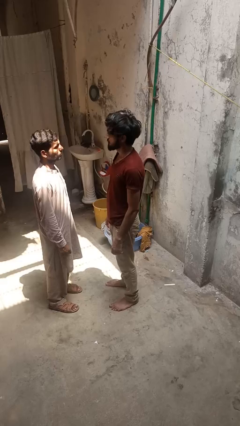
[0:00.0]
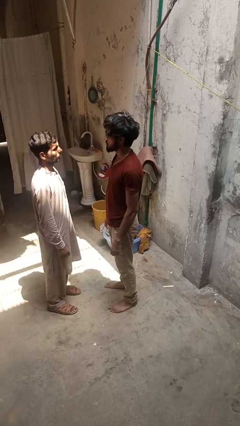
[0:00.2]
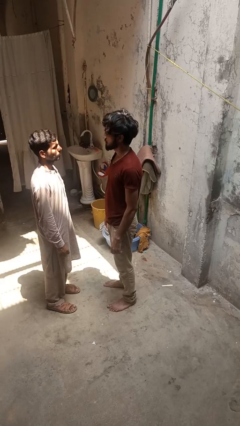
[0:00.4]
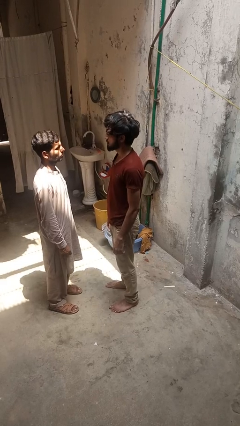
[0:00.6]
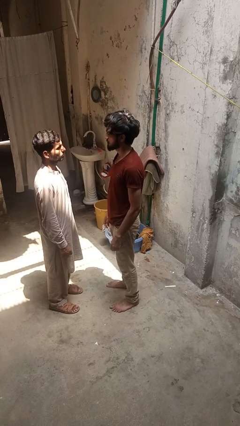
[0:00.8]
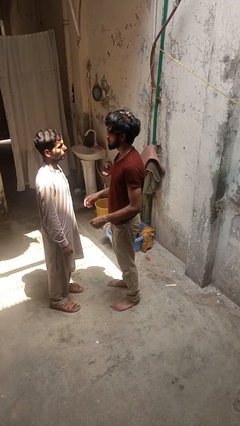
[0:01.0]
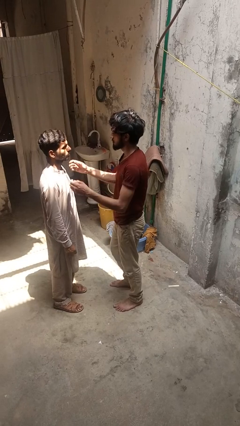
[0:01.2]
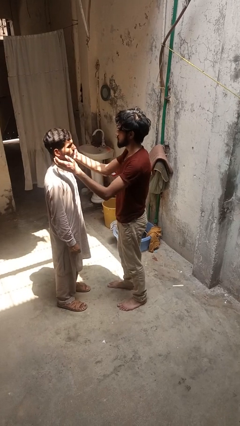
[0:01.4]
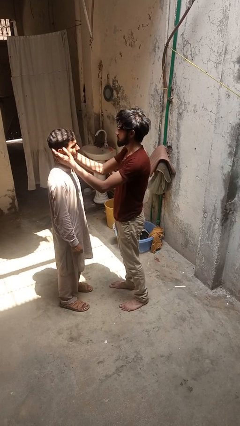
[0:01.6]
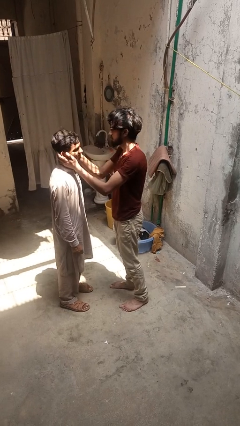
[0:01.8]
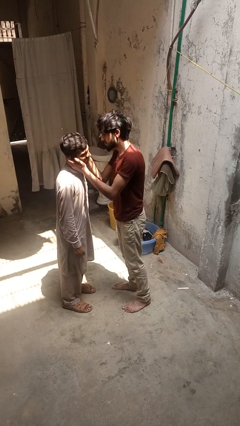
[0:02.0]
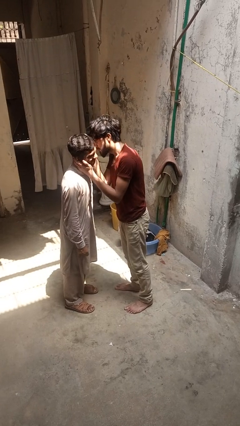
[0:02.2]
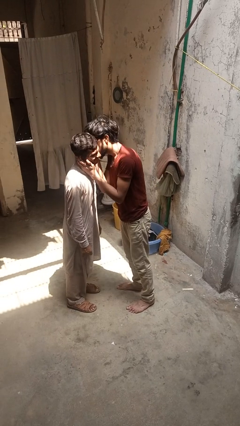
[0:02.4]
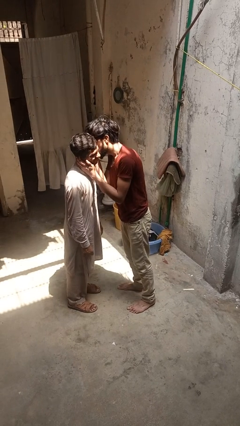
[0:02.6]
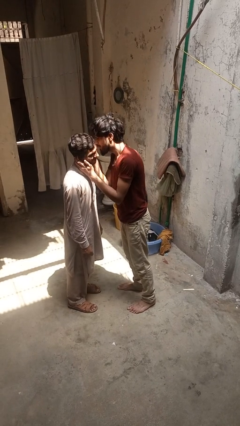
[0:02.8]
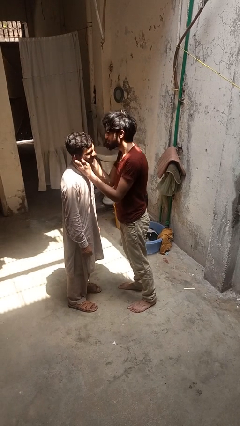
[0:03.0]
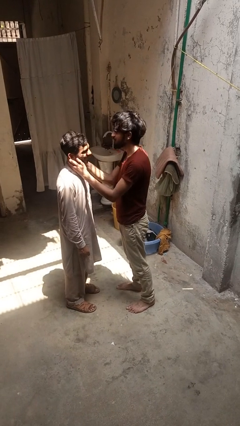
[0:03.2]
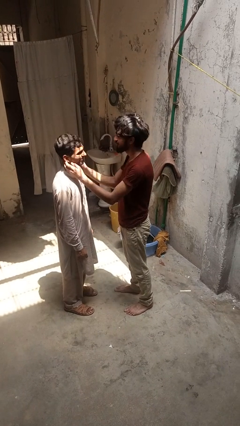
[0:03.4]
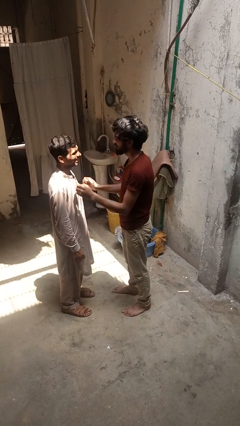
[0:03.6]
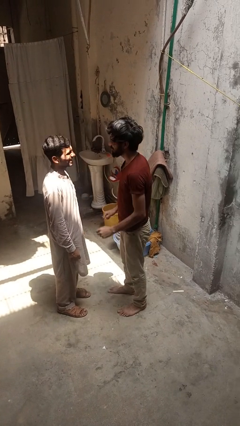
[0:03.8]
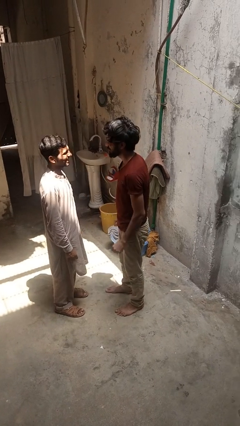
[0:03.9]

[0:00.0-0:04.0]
person kisses cheek of person

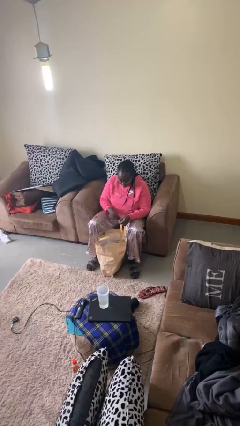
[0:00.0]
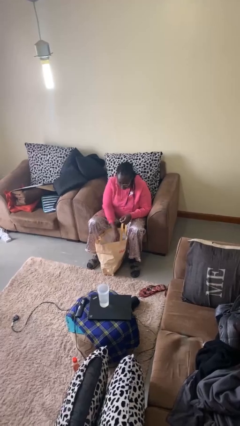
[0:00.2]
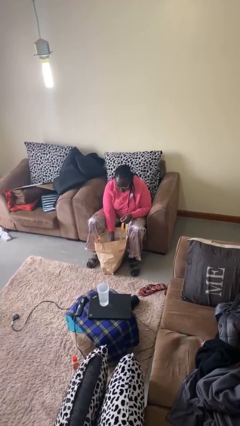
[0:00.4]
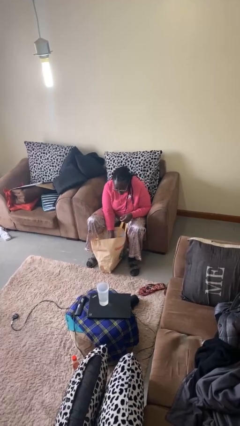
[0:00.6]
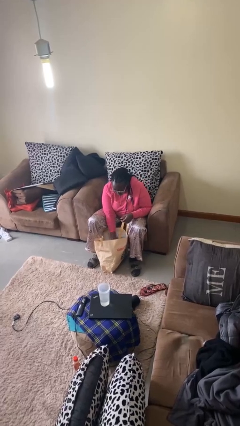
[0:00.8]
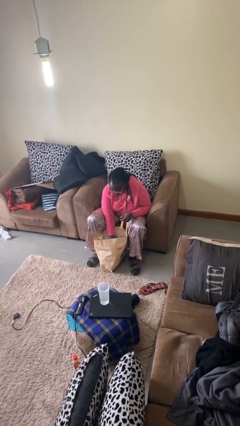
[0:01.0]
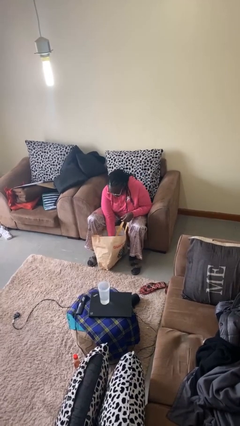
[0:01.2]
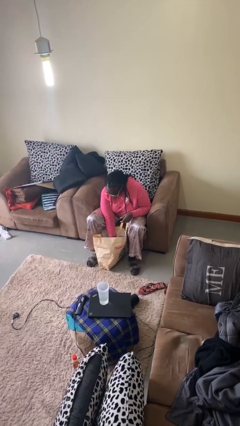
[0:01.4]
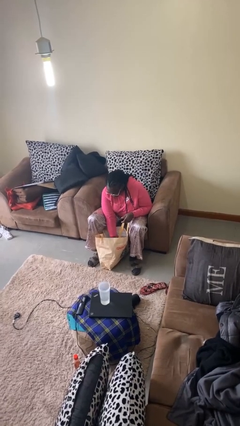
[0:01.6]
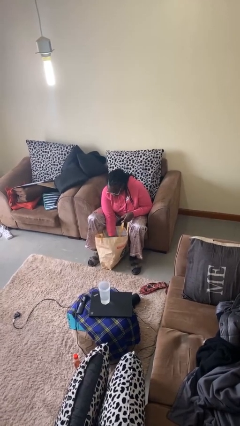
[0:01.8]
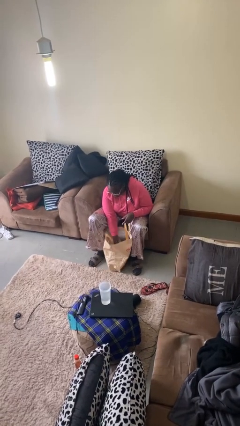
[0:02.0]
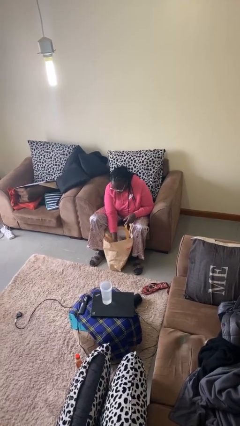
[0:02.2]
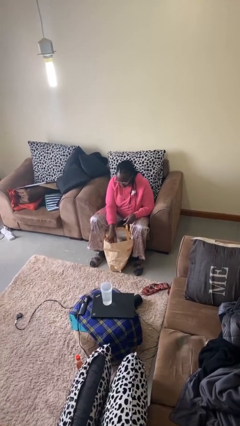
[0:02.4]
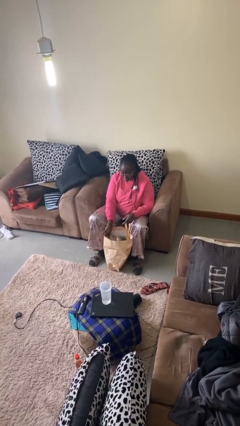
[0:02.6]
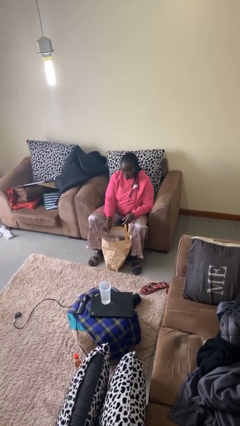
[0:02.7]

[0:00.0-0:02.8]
person searches in bag

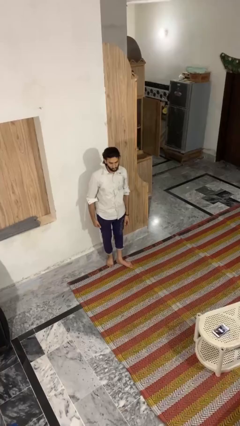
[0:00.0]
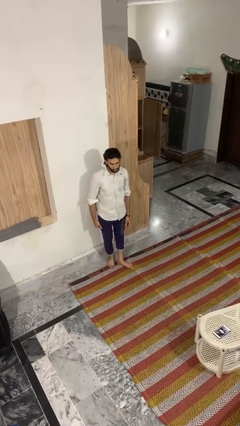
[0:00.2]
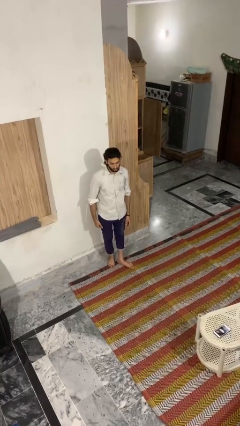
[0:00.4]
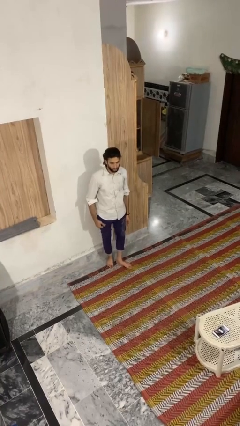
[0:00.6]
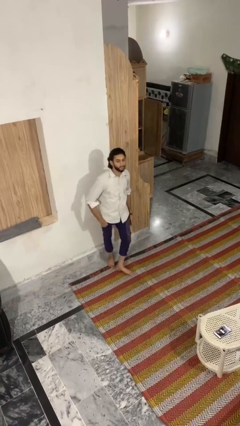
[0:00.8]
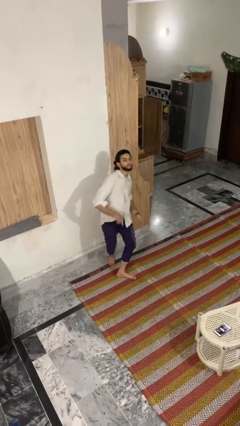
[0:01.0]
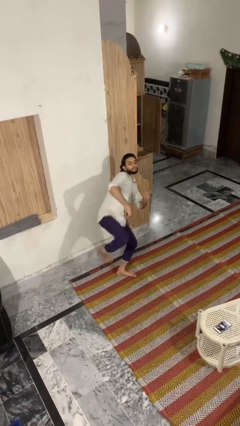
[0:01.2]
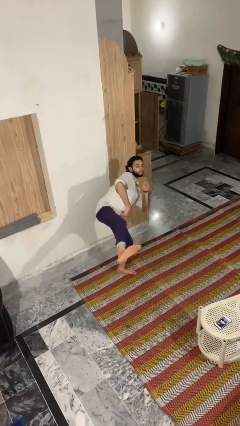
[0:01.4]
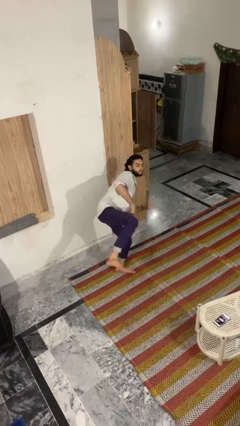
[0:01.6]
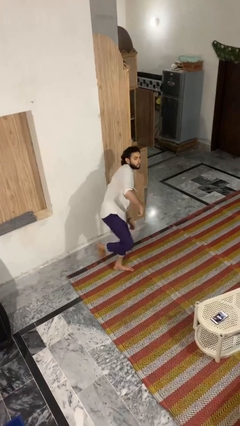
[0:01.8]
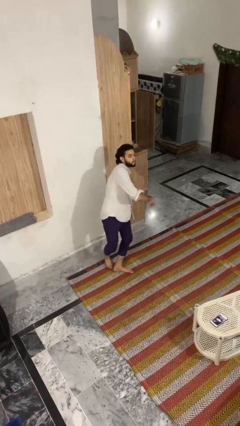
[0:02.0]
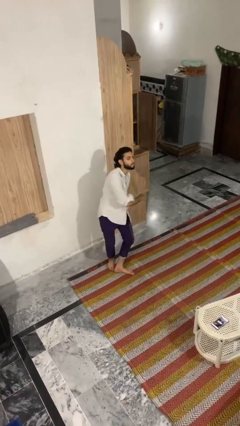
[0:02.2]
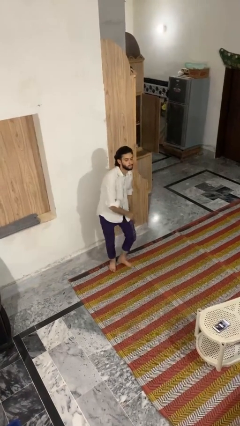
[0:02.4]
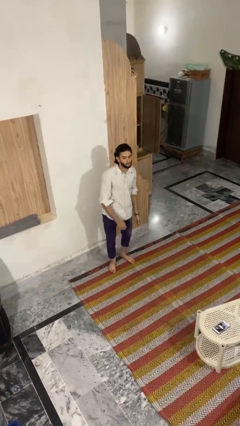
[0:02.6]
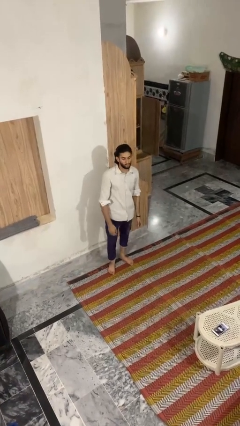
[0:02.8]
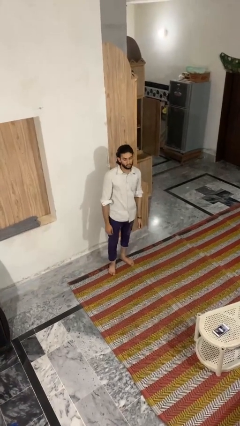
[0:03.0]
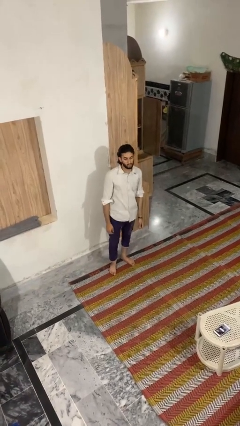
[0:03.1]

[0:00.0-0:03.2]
person karate kicks

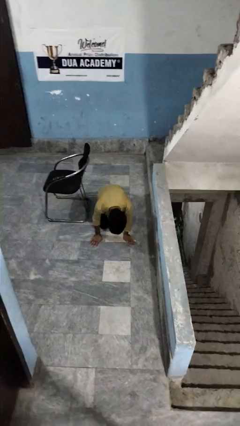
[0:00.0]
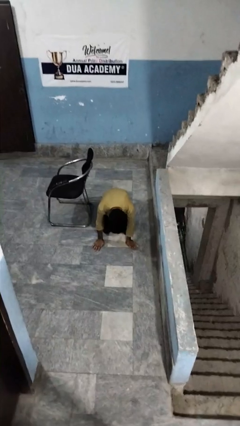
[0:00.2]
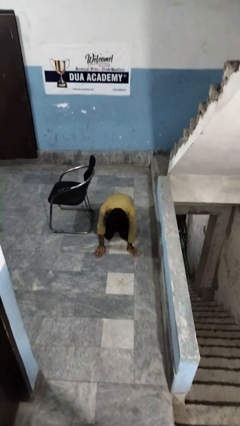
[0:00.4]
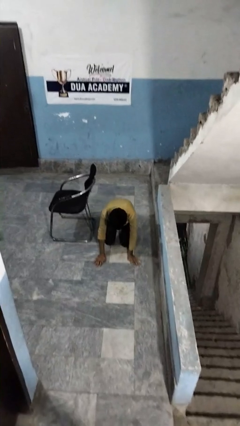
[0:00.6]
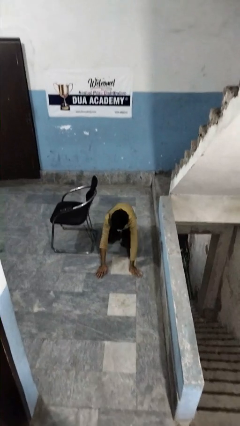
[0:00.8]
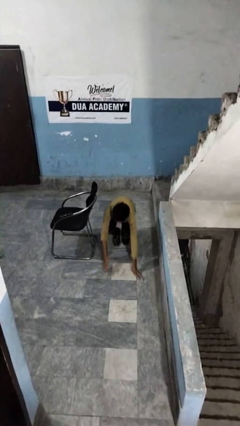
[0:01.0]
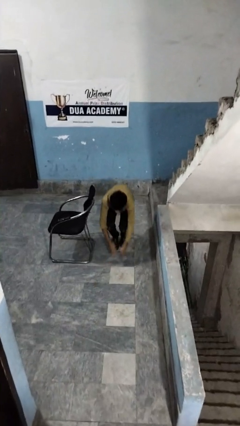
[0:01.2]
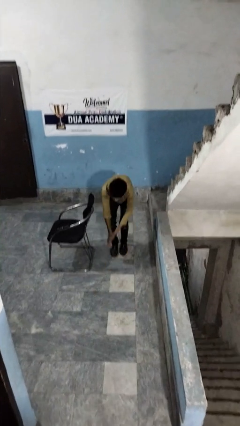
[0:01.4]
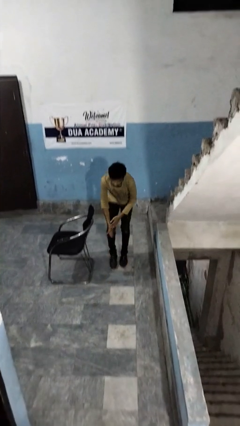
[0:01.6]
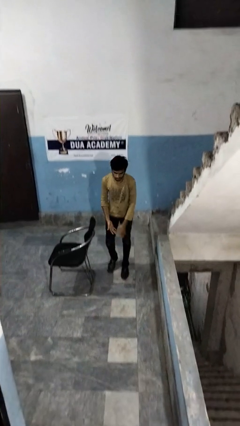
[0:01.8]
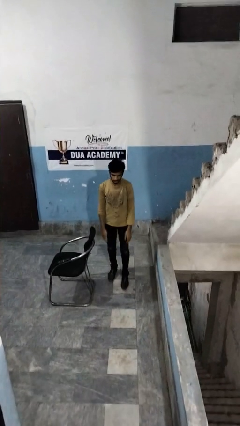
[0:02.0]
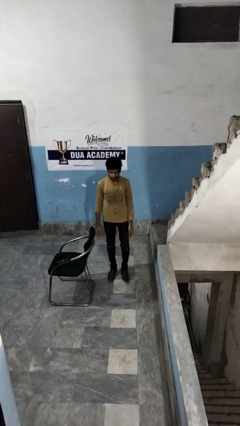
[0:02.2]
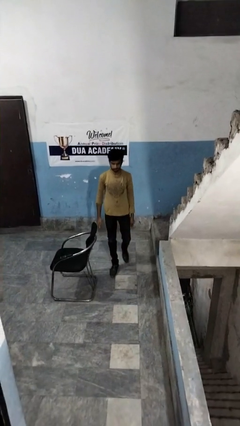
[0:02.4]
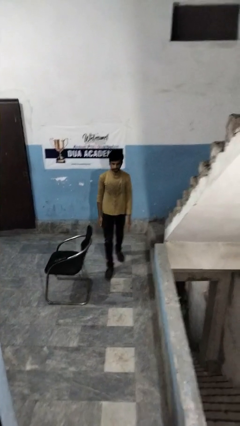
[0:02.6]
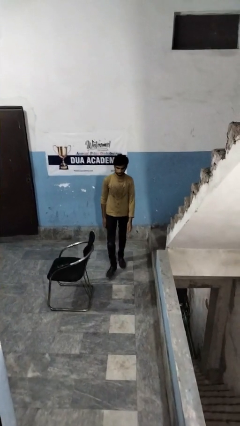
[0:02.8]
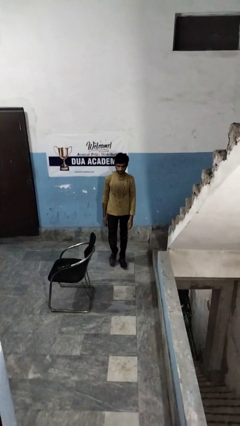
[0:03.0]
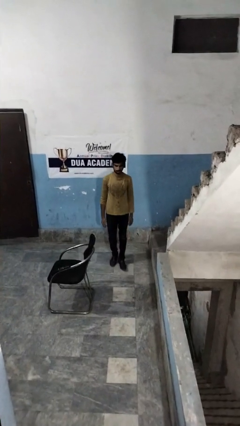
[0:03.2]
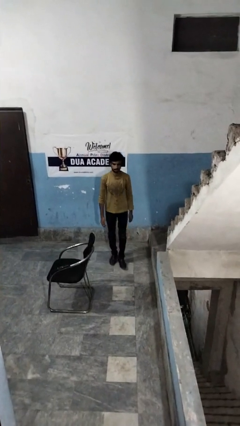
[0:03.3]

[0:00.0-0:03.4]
person stands up from floor

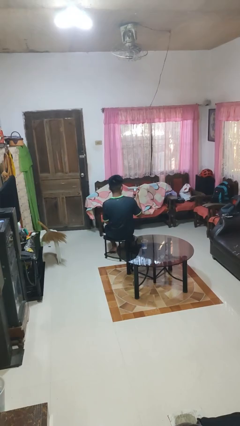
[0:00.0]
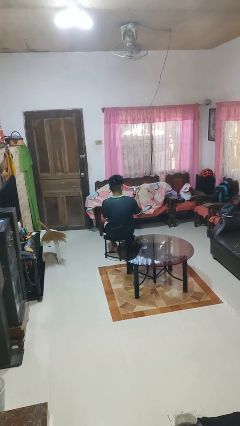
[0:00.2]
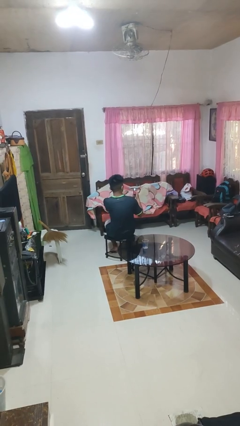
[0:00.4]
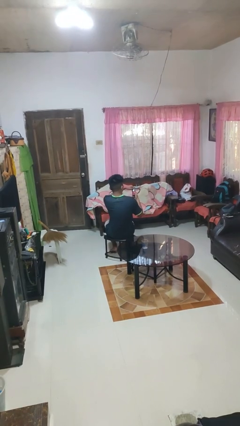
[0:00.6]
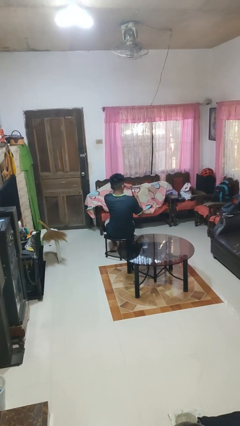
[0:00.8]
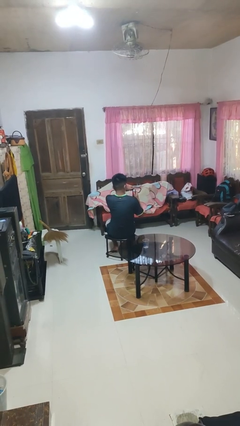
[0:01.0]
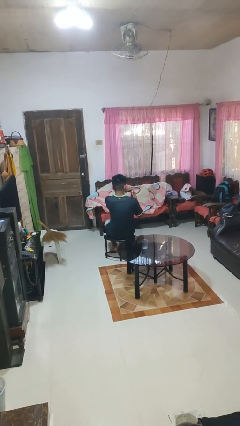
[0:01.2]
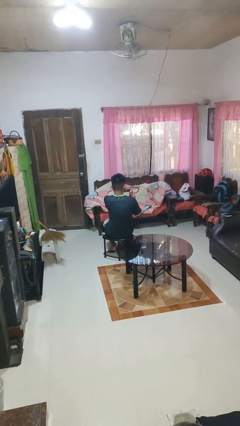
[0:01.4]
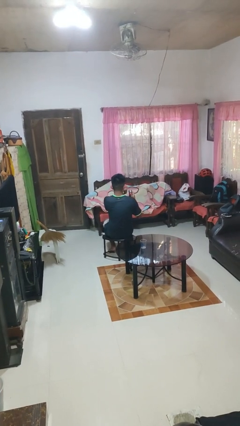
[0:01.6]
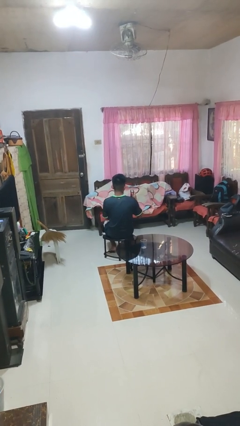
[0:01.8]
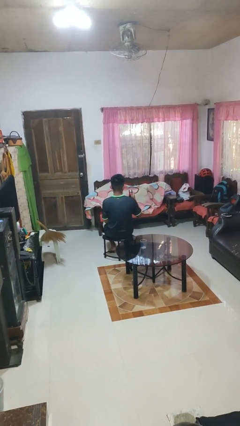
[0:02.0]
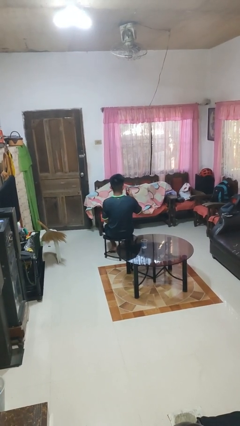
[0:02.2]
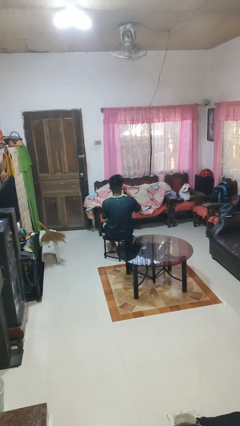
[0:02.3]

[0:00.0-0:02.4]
person opens beverage can

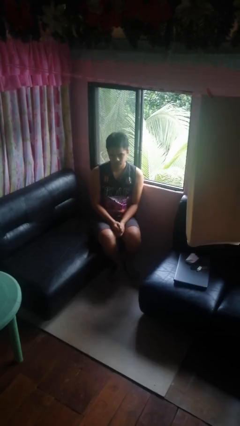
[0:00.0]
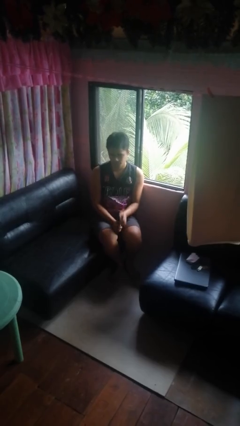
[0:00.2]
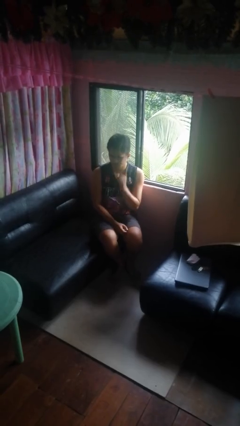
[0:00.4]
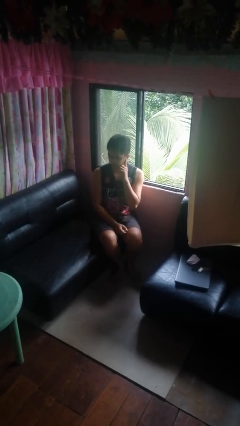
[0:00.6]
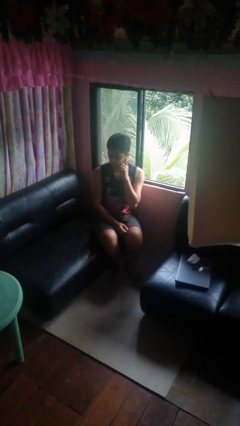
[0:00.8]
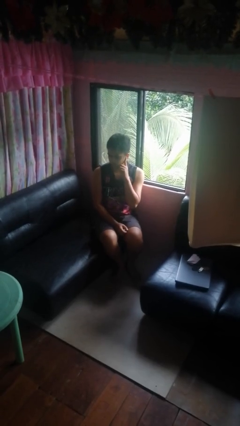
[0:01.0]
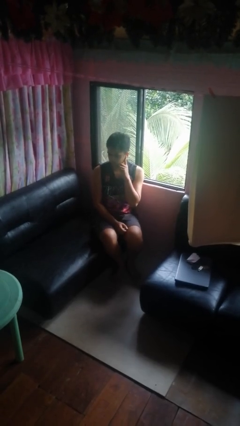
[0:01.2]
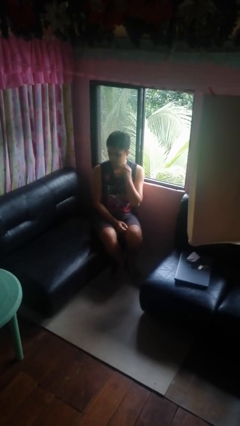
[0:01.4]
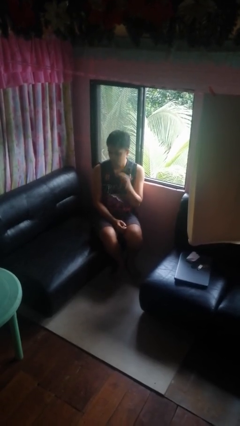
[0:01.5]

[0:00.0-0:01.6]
person gestures listen closely

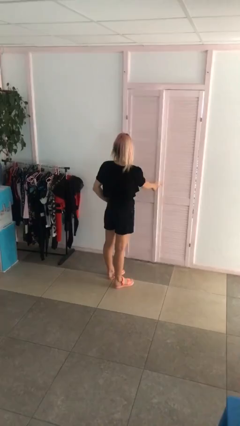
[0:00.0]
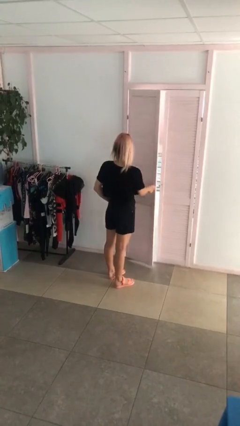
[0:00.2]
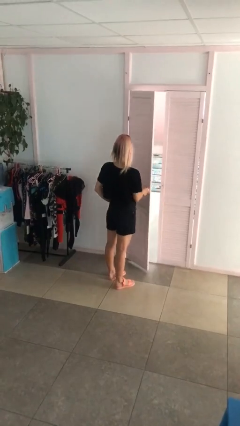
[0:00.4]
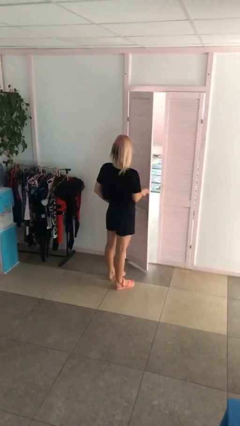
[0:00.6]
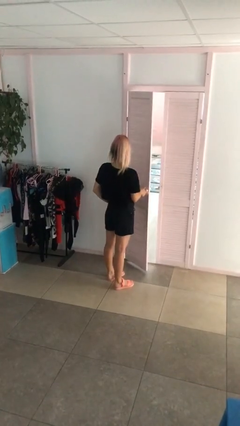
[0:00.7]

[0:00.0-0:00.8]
person opens facility door
